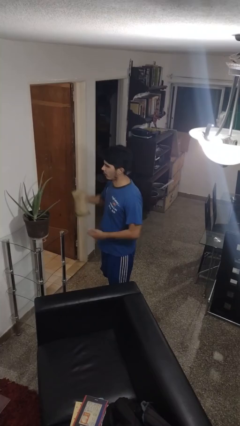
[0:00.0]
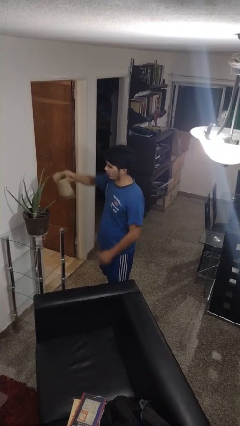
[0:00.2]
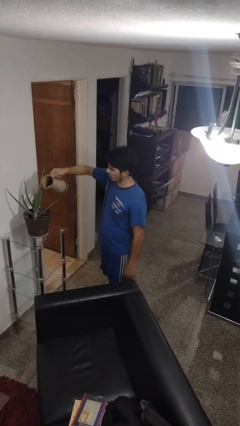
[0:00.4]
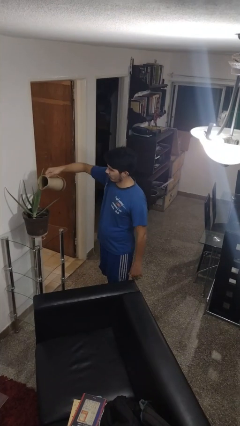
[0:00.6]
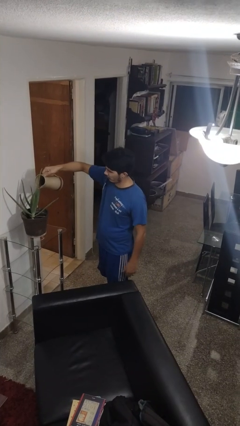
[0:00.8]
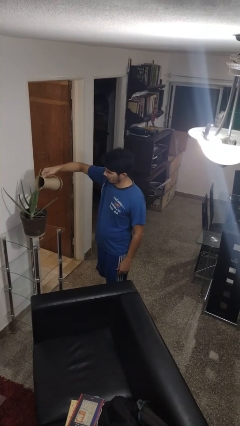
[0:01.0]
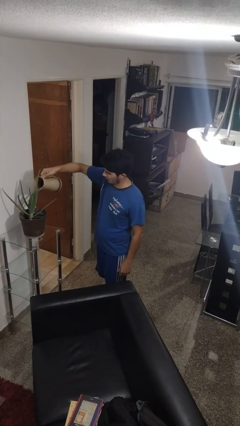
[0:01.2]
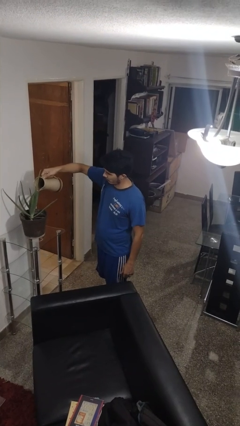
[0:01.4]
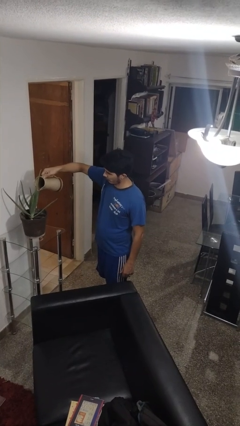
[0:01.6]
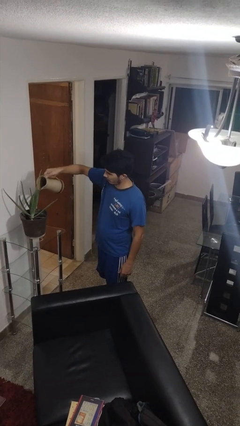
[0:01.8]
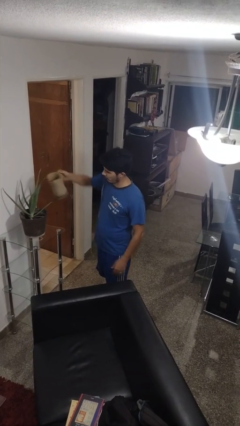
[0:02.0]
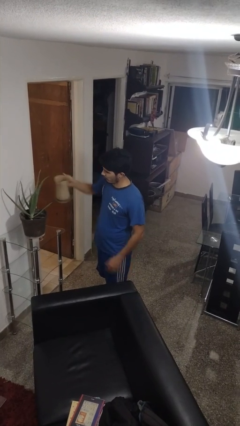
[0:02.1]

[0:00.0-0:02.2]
person waters houseplant

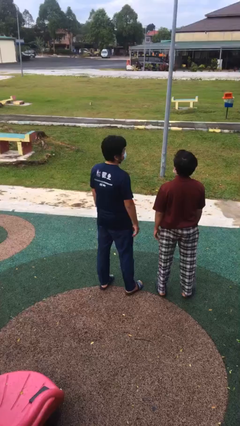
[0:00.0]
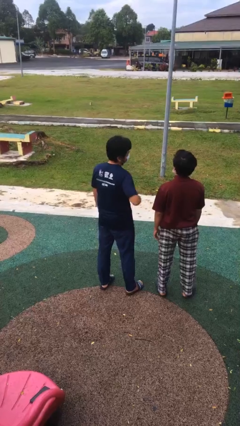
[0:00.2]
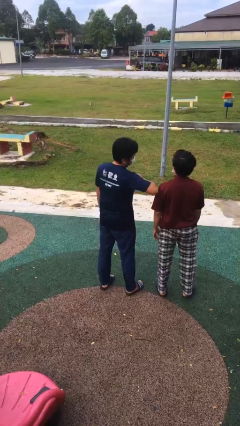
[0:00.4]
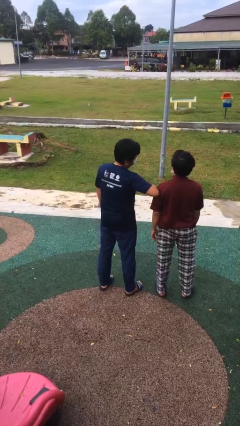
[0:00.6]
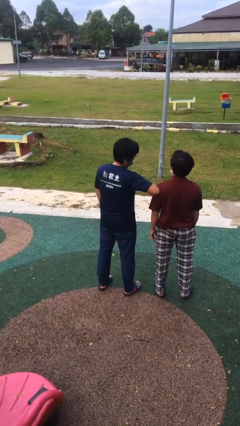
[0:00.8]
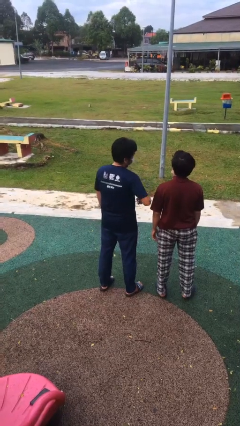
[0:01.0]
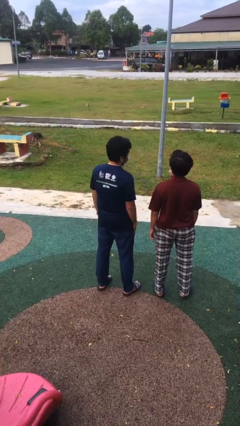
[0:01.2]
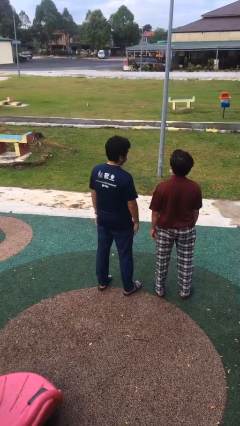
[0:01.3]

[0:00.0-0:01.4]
person nudges person with elbow

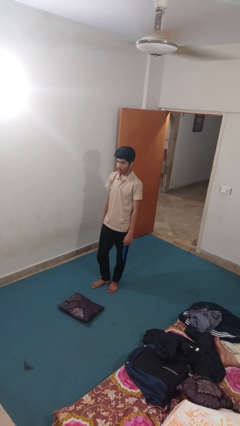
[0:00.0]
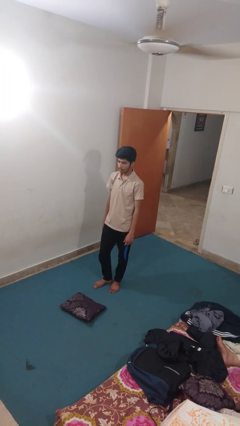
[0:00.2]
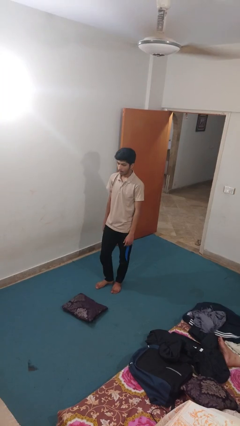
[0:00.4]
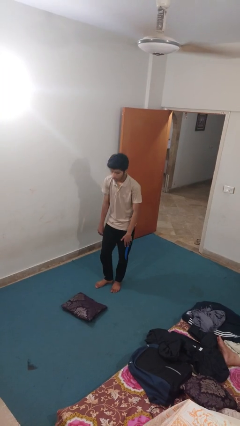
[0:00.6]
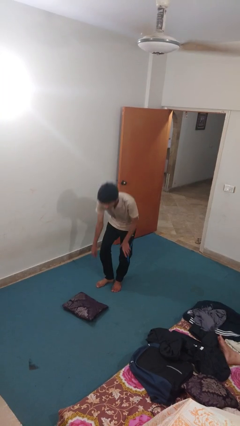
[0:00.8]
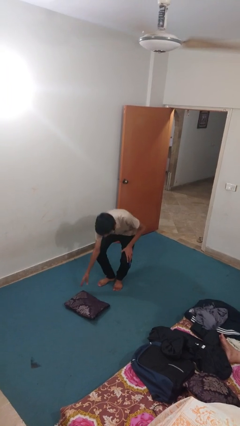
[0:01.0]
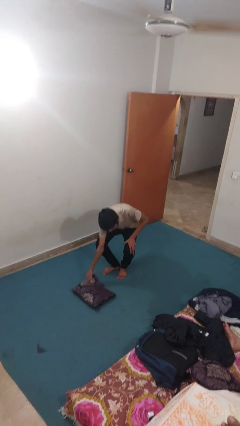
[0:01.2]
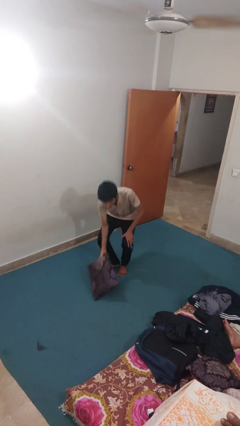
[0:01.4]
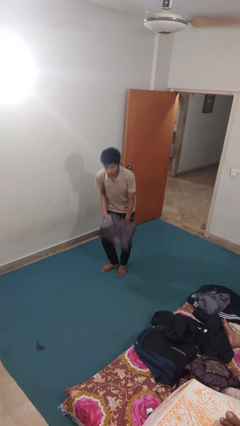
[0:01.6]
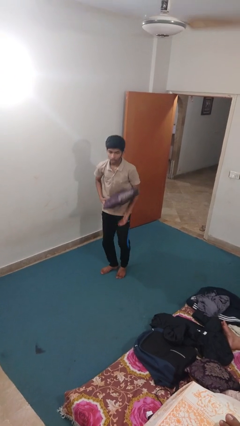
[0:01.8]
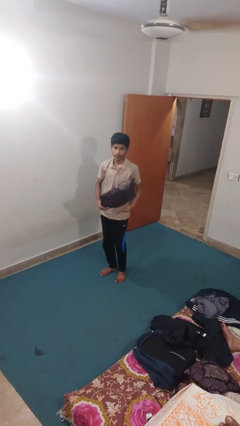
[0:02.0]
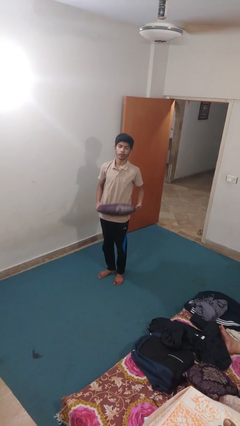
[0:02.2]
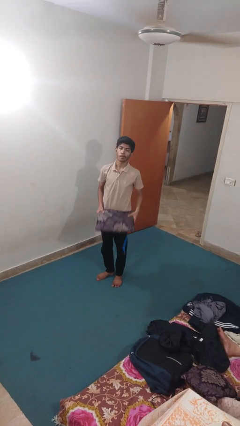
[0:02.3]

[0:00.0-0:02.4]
person picks up object from floor

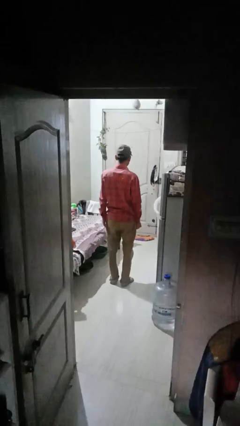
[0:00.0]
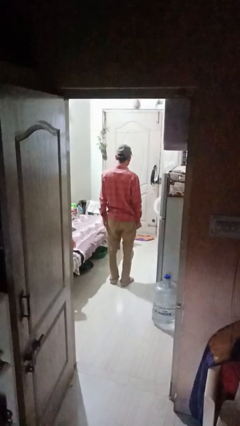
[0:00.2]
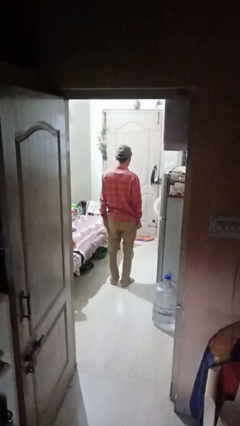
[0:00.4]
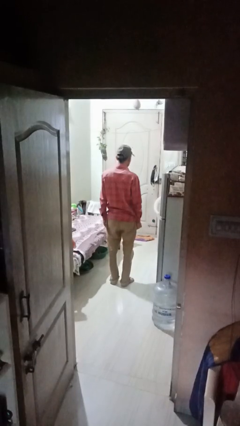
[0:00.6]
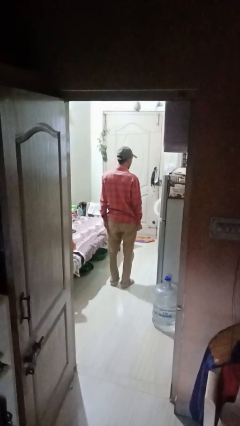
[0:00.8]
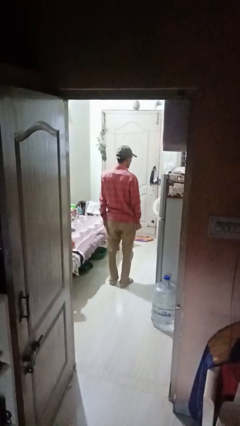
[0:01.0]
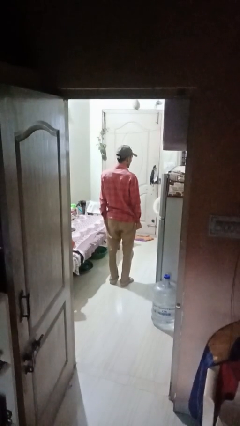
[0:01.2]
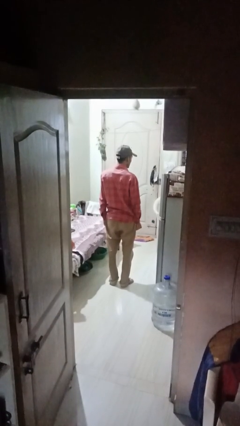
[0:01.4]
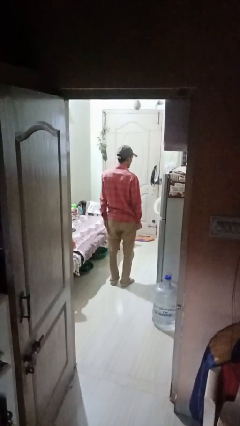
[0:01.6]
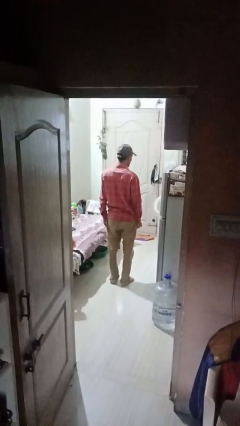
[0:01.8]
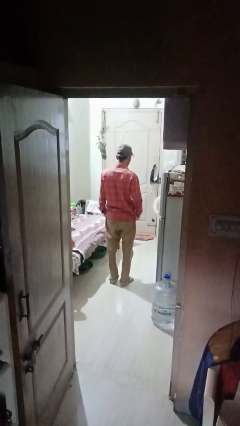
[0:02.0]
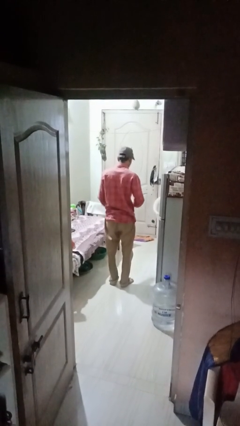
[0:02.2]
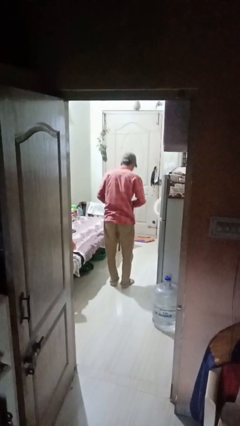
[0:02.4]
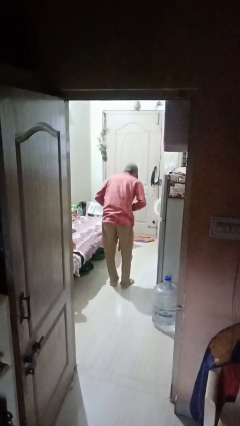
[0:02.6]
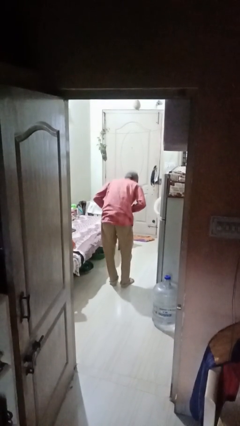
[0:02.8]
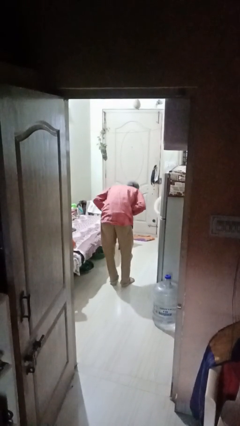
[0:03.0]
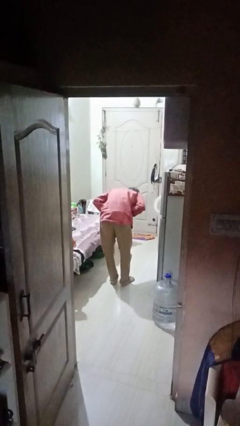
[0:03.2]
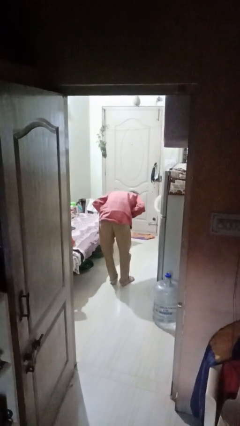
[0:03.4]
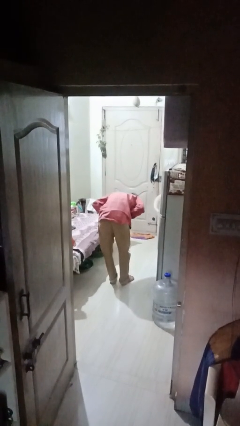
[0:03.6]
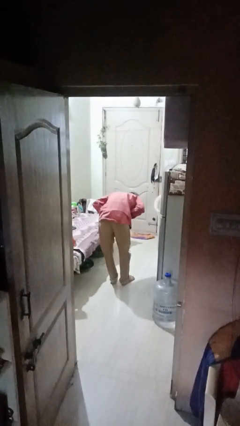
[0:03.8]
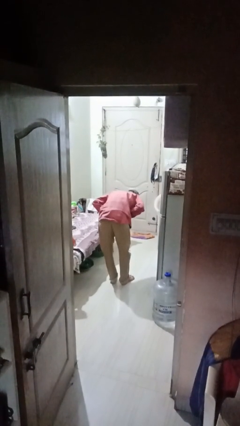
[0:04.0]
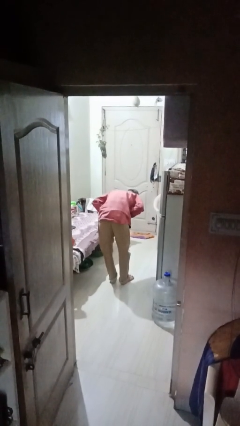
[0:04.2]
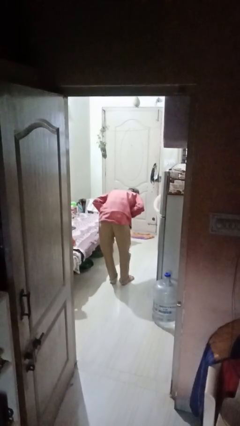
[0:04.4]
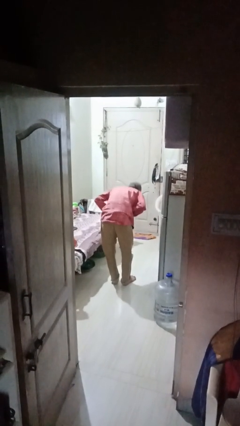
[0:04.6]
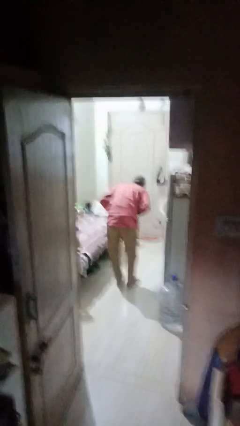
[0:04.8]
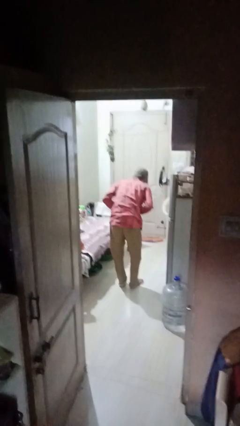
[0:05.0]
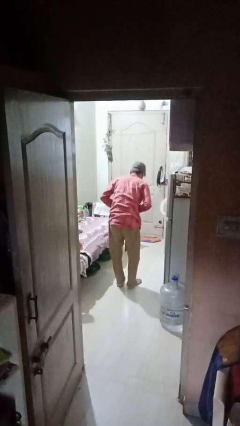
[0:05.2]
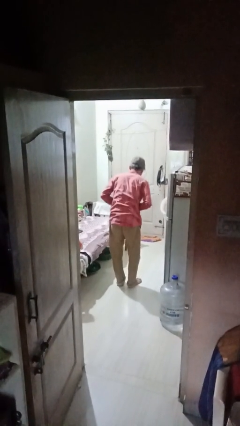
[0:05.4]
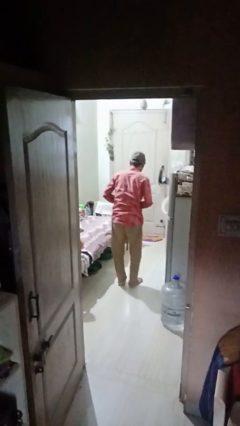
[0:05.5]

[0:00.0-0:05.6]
person bows

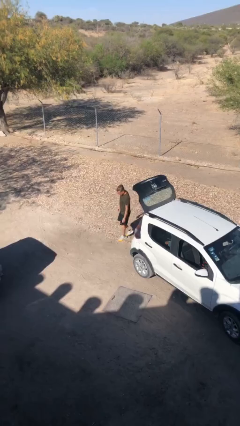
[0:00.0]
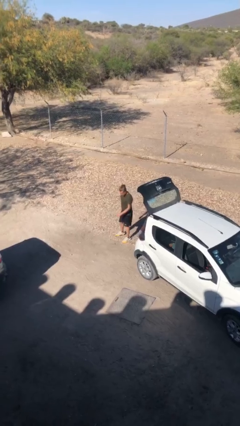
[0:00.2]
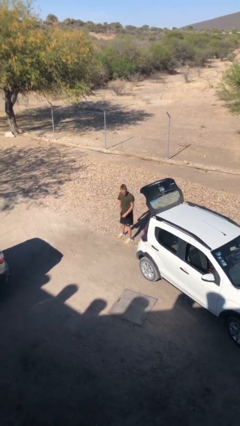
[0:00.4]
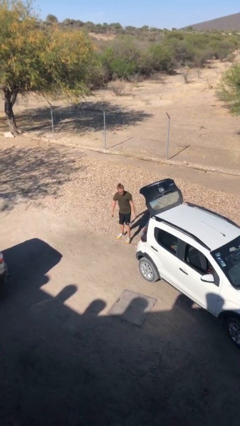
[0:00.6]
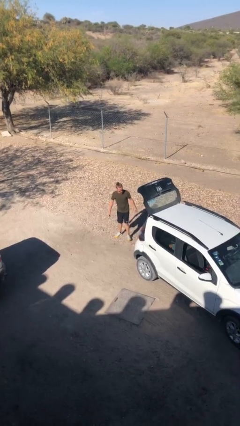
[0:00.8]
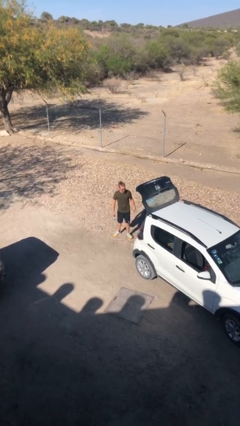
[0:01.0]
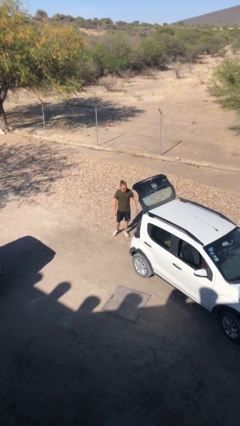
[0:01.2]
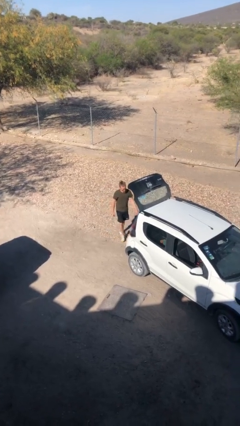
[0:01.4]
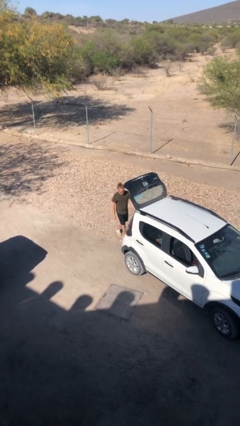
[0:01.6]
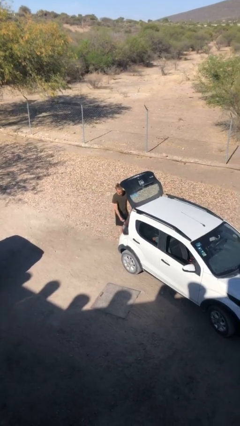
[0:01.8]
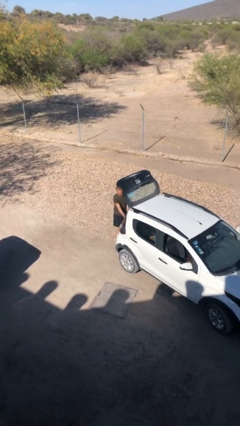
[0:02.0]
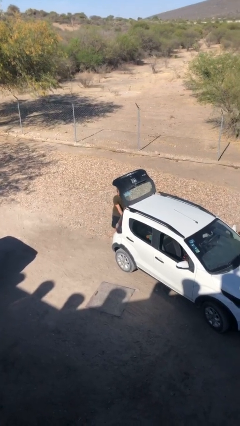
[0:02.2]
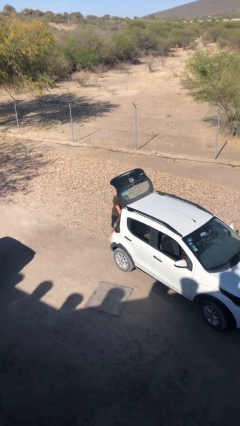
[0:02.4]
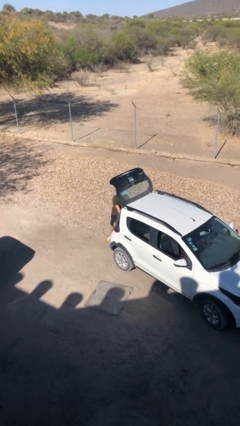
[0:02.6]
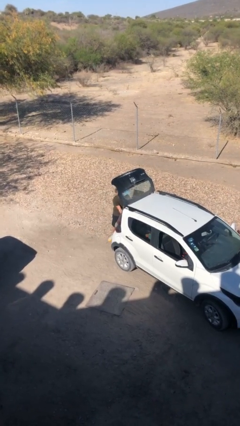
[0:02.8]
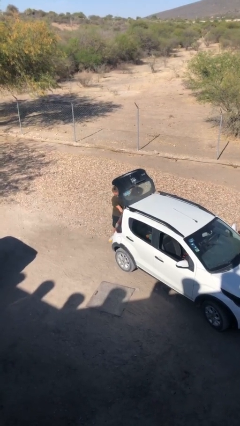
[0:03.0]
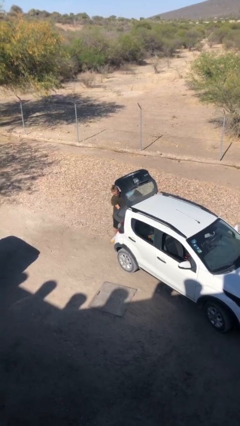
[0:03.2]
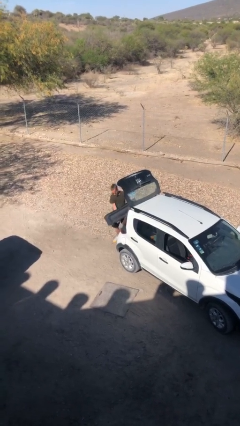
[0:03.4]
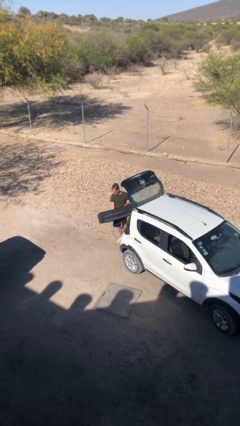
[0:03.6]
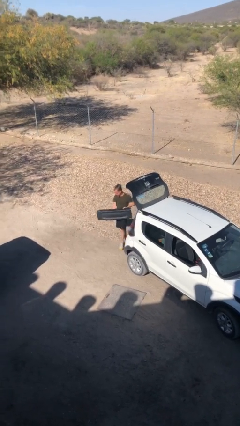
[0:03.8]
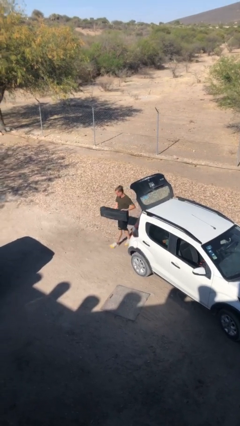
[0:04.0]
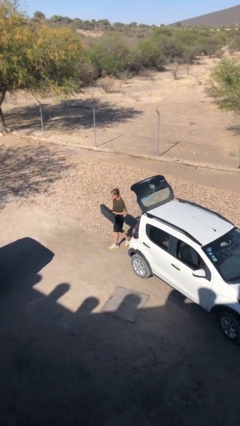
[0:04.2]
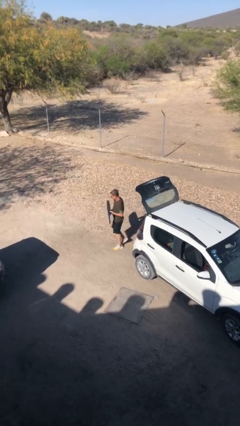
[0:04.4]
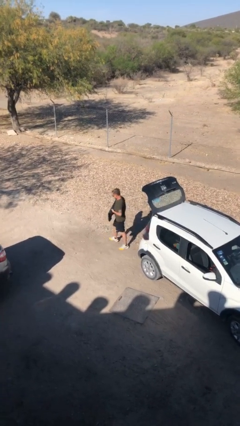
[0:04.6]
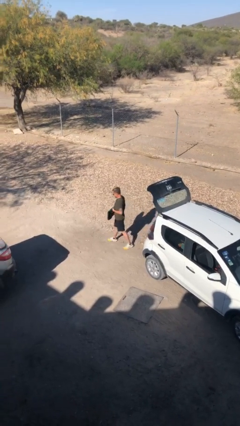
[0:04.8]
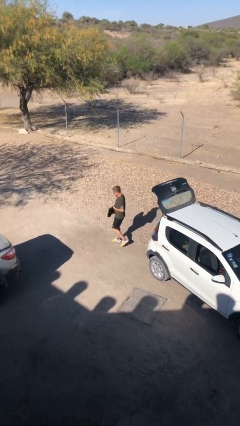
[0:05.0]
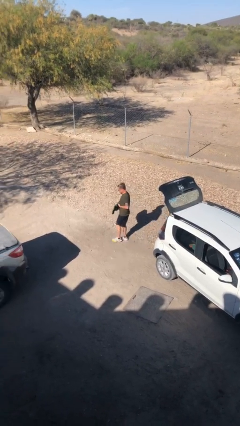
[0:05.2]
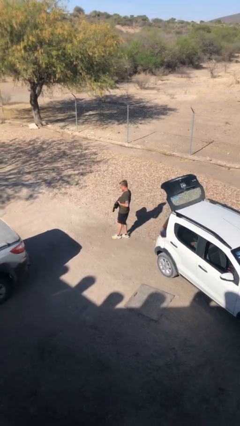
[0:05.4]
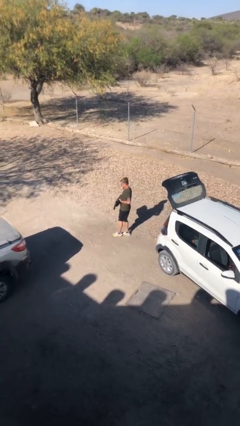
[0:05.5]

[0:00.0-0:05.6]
person unloads car

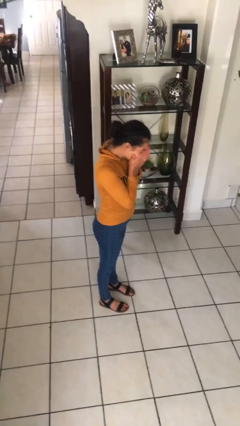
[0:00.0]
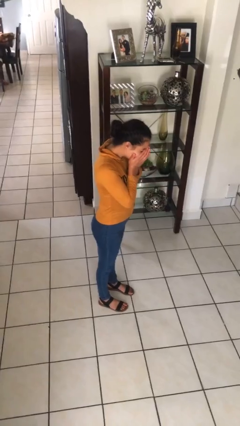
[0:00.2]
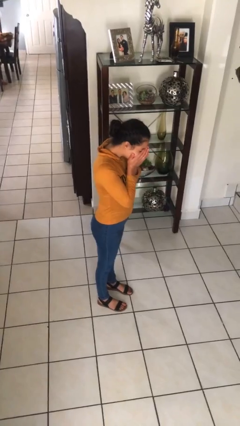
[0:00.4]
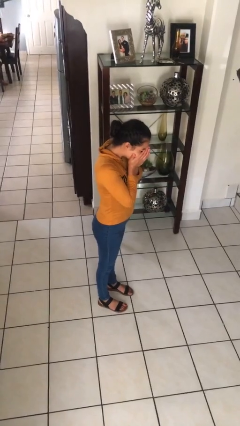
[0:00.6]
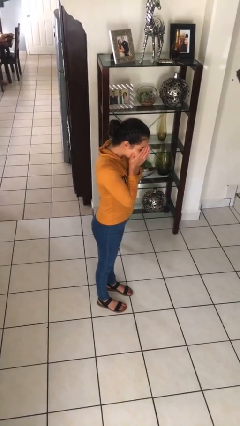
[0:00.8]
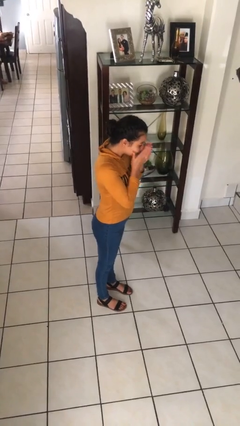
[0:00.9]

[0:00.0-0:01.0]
person sneezes into hand
